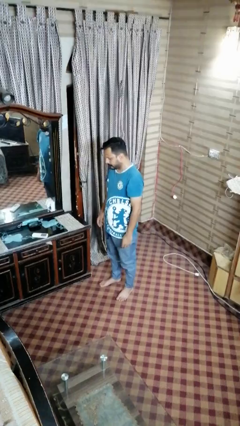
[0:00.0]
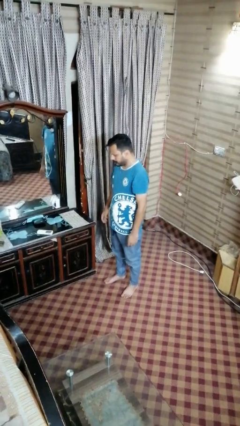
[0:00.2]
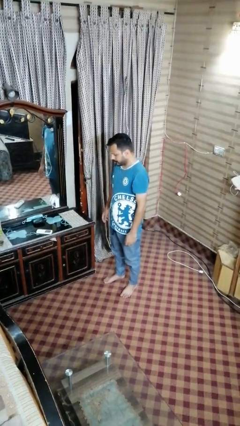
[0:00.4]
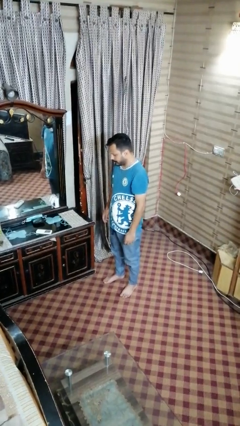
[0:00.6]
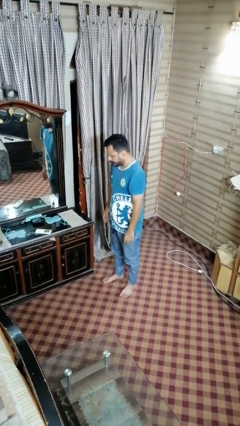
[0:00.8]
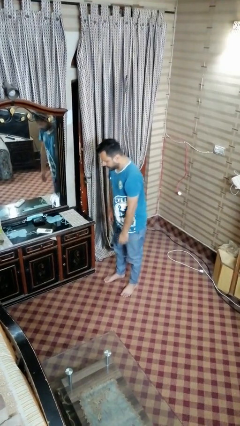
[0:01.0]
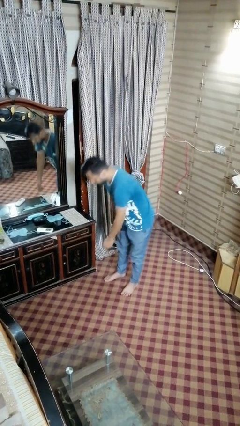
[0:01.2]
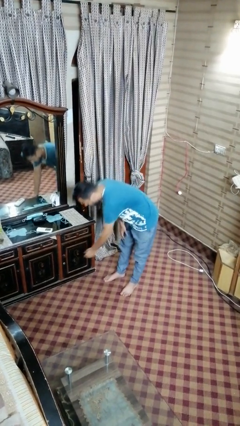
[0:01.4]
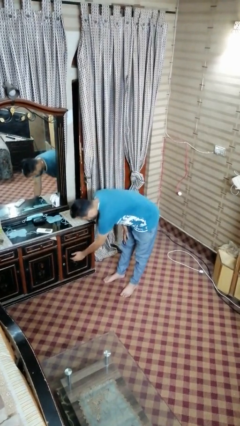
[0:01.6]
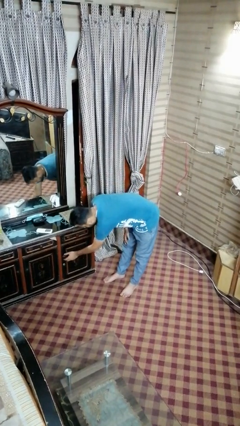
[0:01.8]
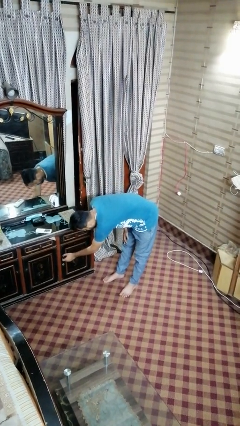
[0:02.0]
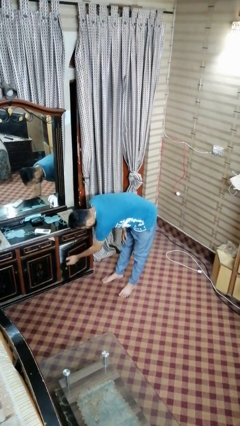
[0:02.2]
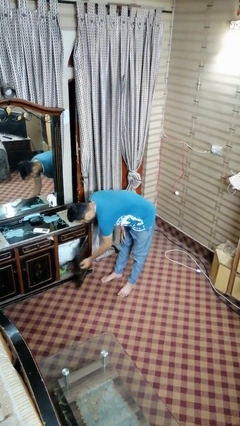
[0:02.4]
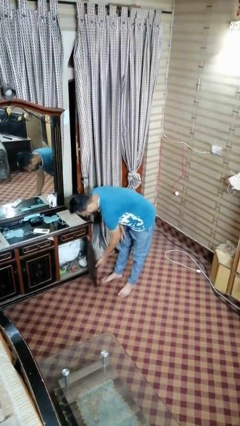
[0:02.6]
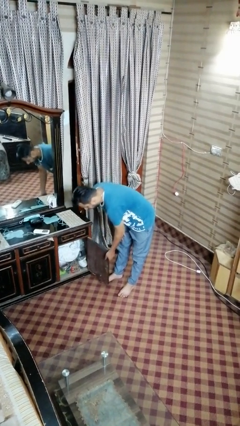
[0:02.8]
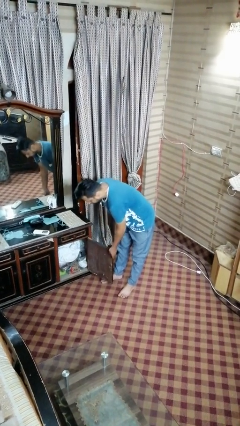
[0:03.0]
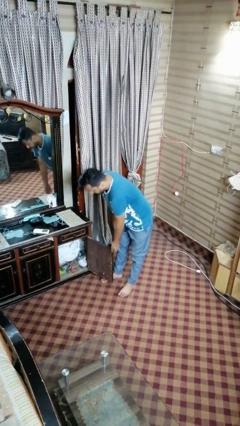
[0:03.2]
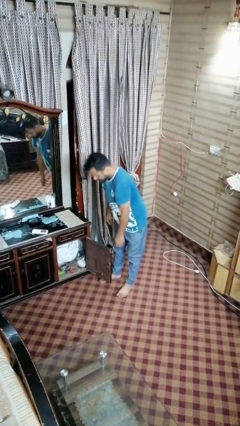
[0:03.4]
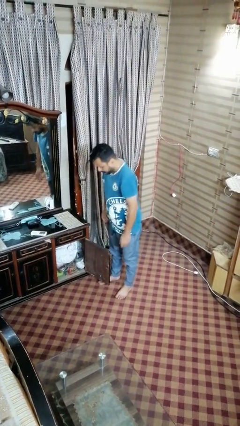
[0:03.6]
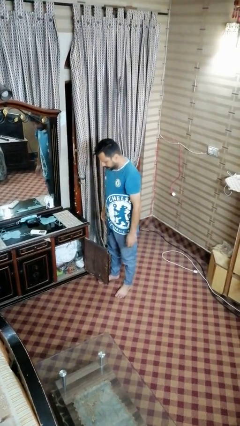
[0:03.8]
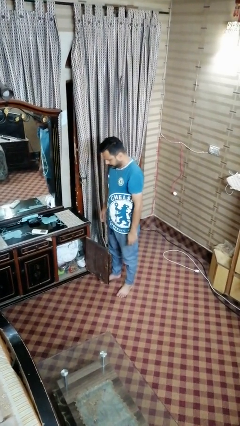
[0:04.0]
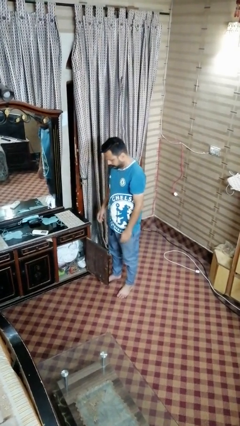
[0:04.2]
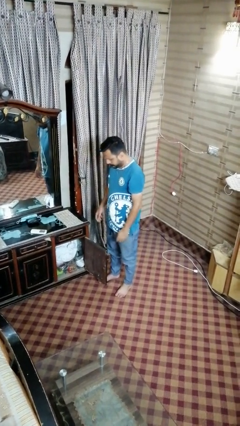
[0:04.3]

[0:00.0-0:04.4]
person opens dresser drawer

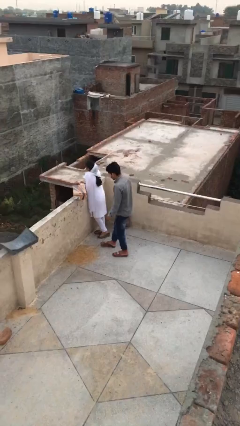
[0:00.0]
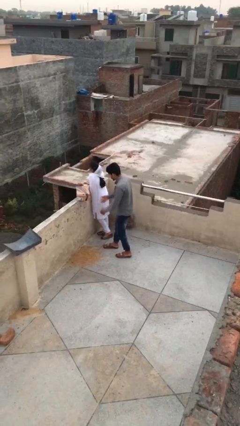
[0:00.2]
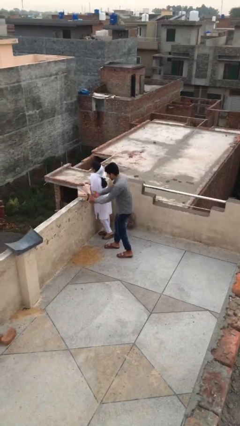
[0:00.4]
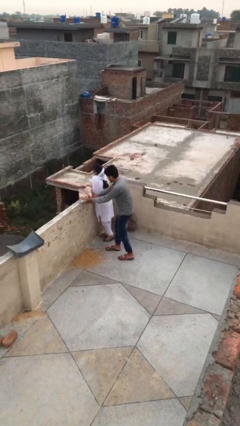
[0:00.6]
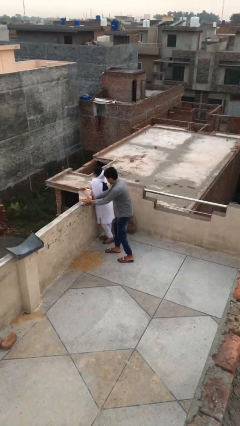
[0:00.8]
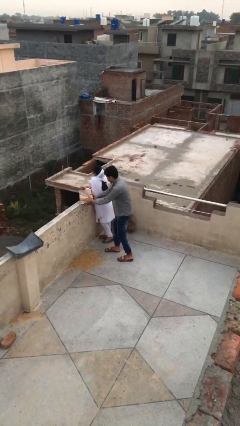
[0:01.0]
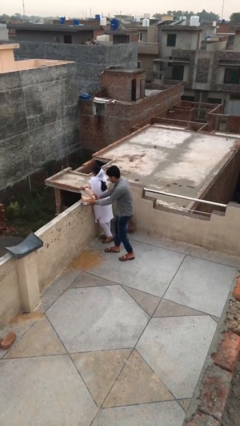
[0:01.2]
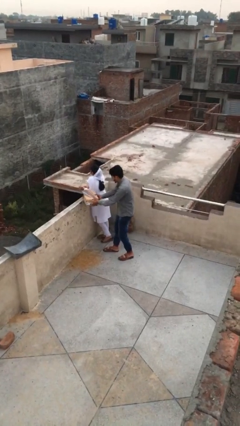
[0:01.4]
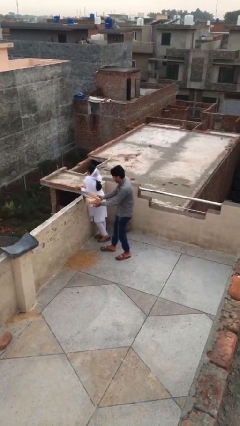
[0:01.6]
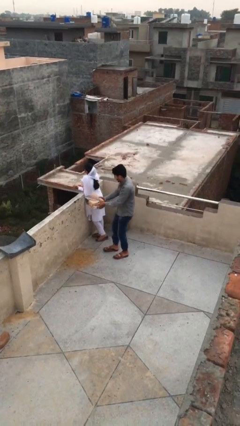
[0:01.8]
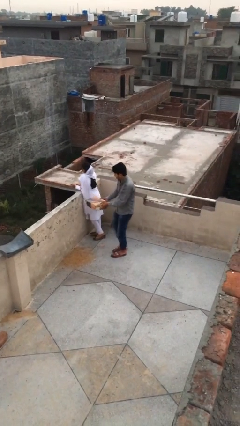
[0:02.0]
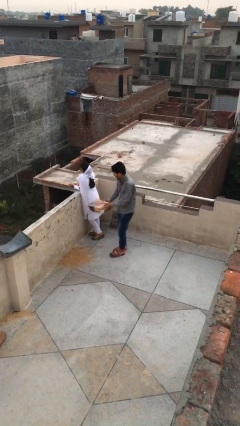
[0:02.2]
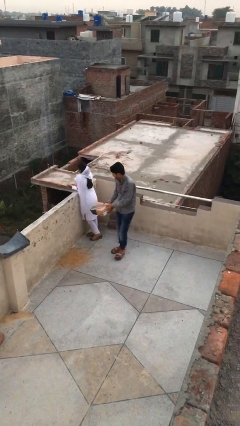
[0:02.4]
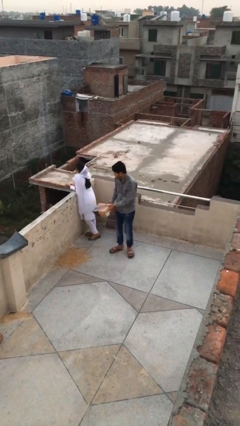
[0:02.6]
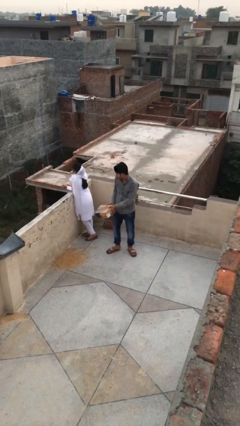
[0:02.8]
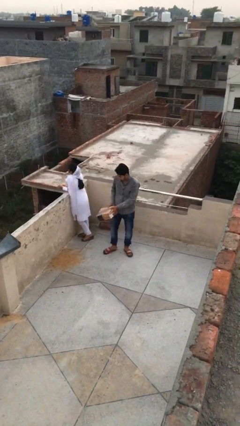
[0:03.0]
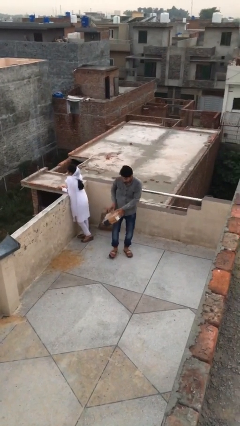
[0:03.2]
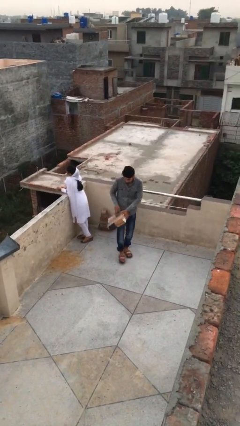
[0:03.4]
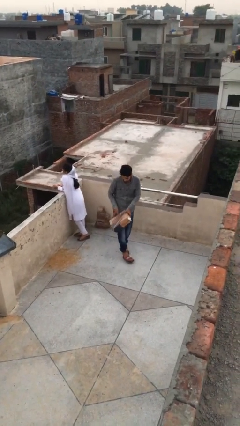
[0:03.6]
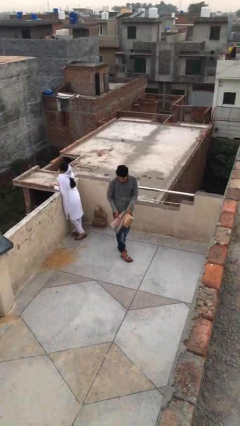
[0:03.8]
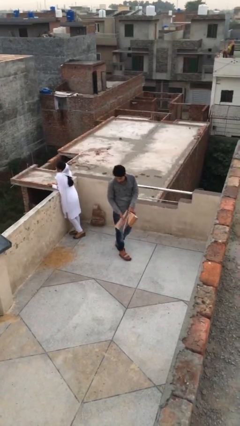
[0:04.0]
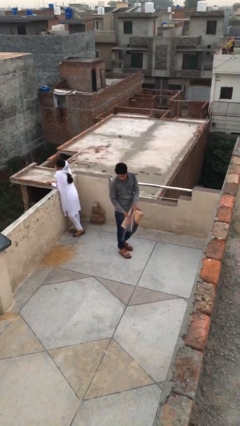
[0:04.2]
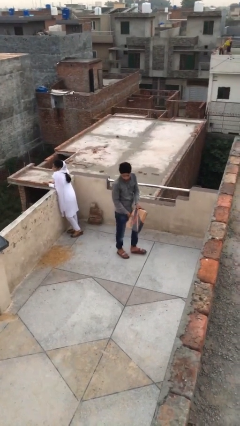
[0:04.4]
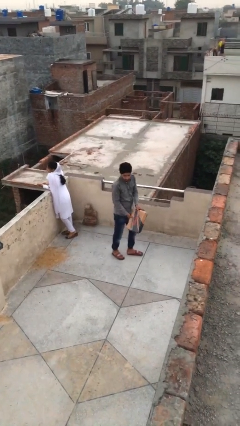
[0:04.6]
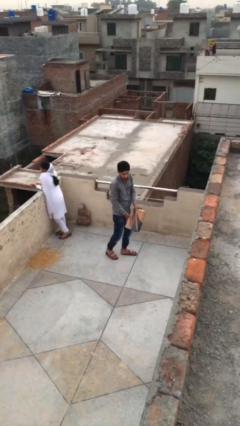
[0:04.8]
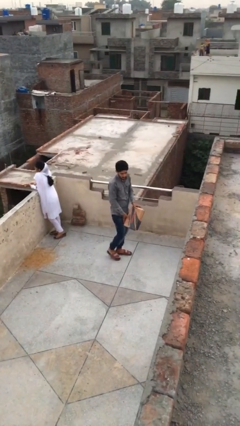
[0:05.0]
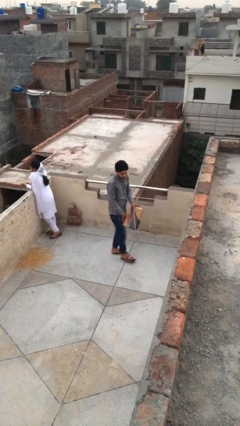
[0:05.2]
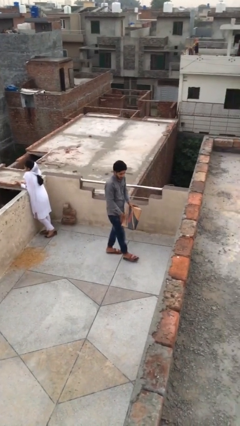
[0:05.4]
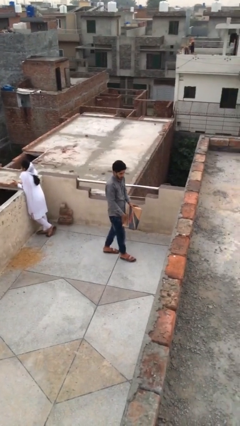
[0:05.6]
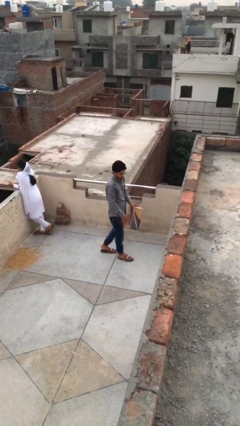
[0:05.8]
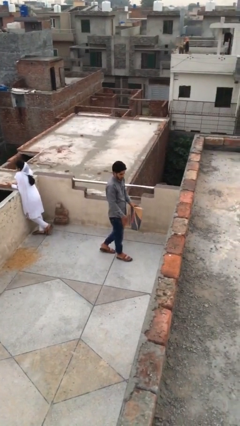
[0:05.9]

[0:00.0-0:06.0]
person steals object from person

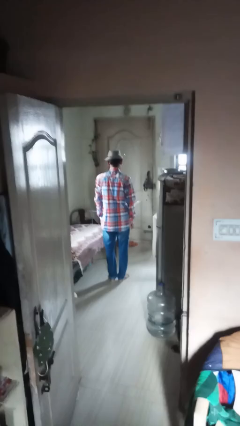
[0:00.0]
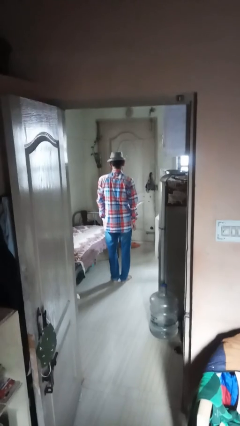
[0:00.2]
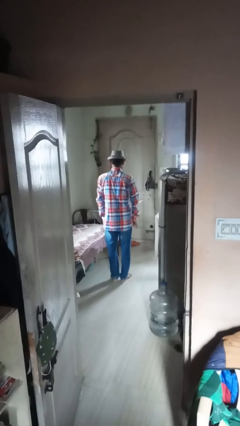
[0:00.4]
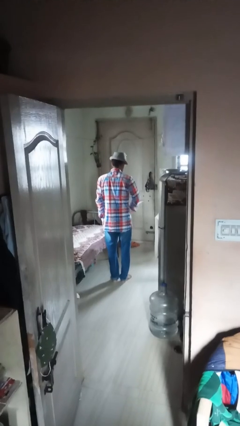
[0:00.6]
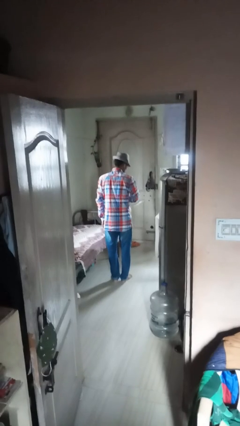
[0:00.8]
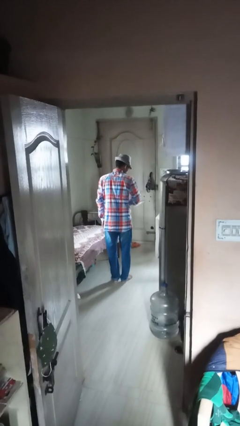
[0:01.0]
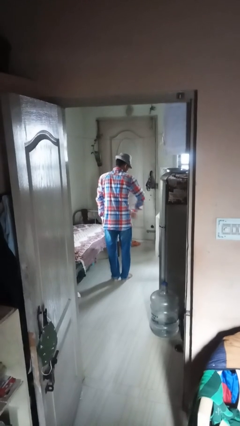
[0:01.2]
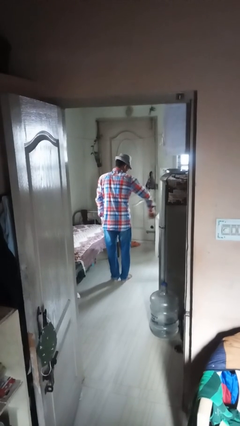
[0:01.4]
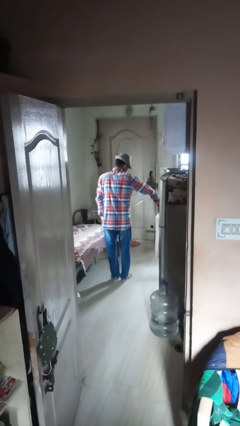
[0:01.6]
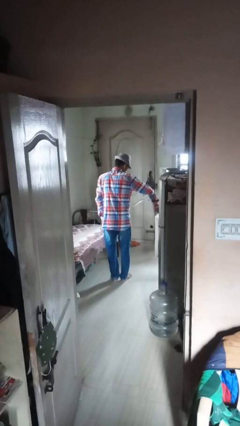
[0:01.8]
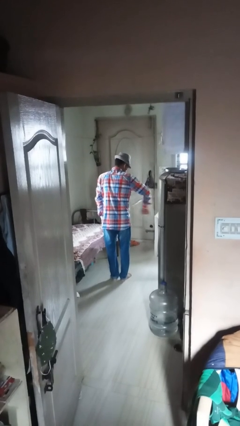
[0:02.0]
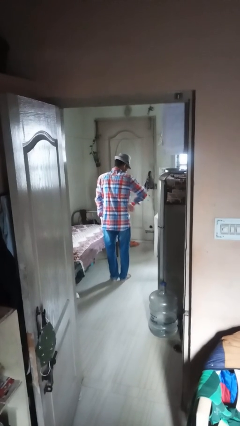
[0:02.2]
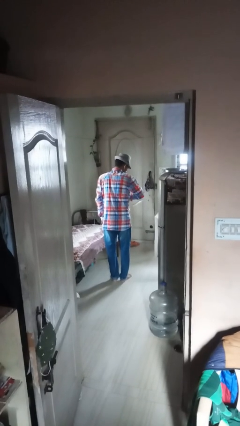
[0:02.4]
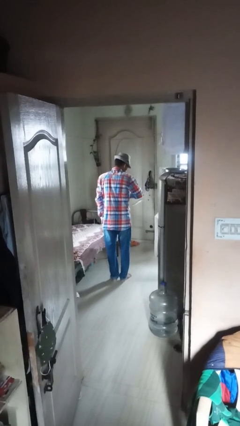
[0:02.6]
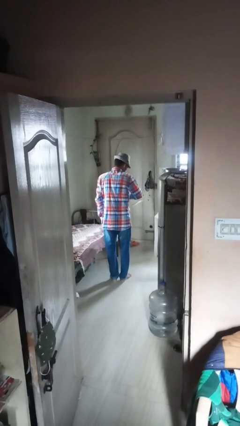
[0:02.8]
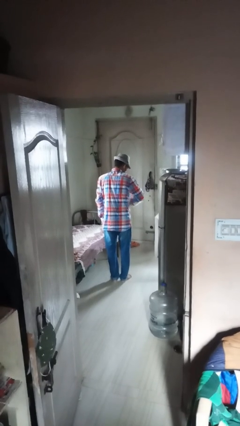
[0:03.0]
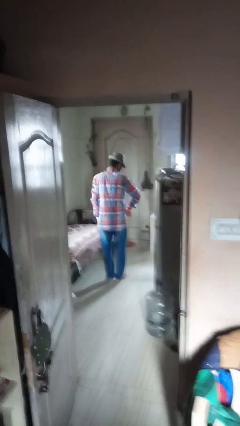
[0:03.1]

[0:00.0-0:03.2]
person gestures hang loose

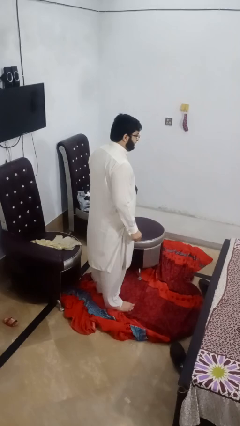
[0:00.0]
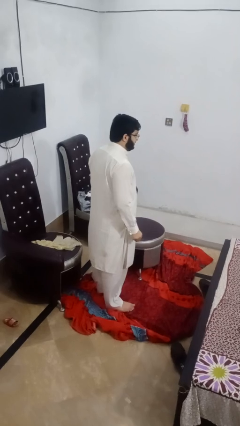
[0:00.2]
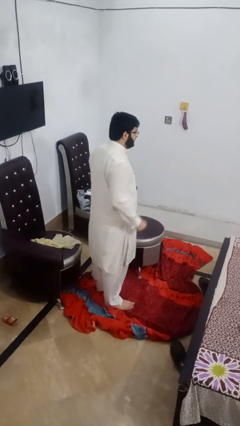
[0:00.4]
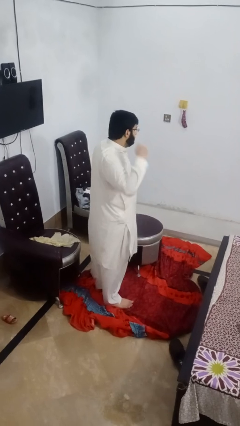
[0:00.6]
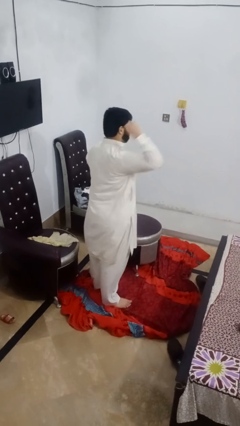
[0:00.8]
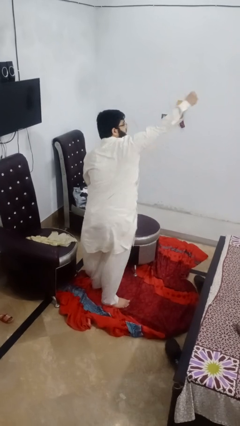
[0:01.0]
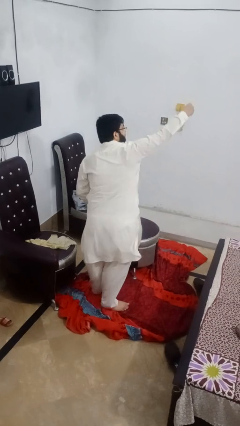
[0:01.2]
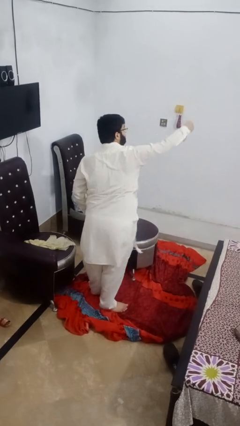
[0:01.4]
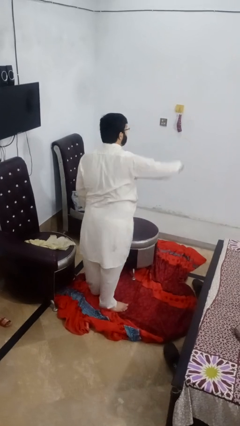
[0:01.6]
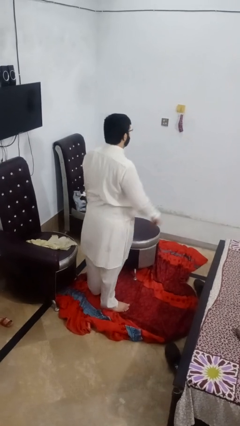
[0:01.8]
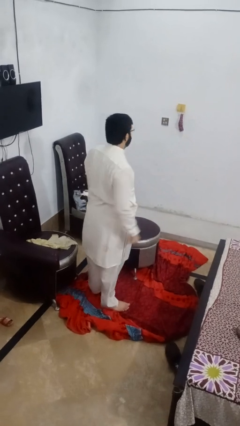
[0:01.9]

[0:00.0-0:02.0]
person punches

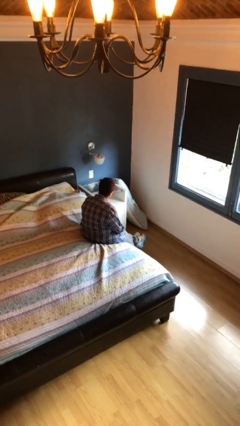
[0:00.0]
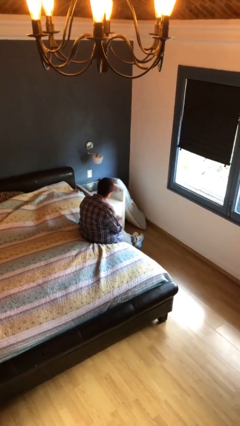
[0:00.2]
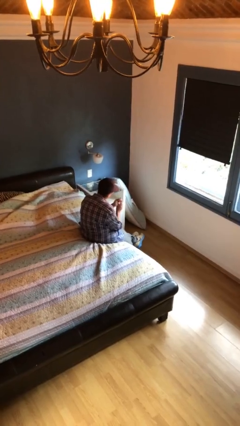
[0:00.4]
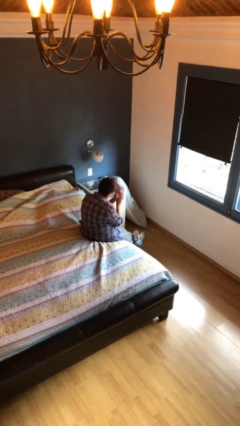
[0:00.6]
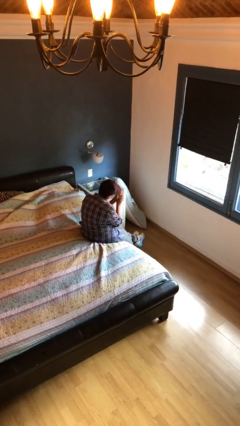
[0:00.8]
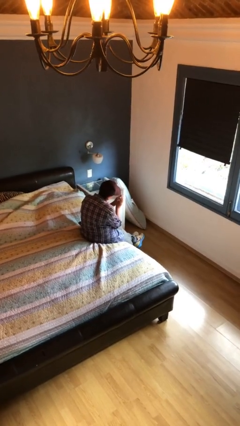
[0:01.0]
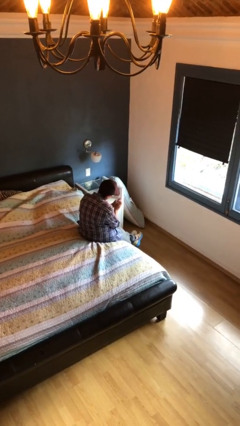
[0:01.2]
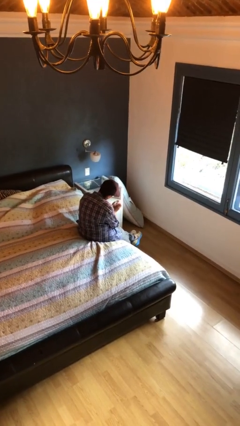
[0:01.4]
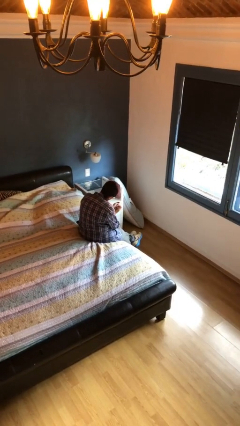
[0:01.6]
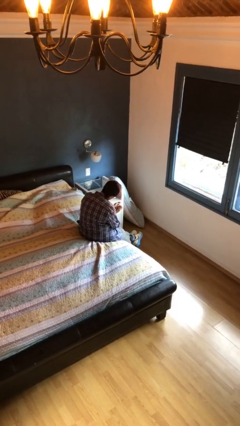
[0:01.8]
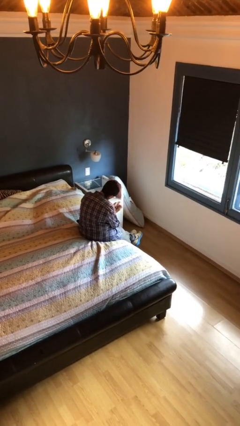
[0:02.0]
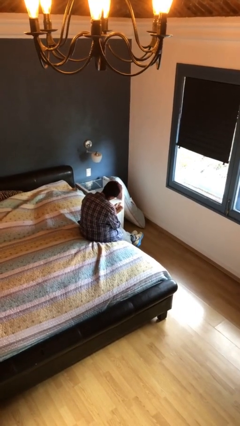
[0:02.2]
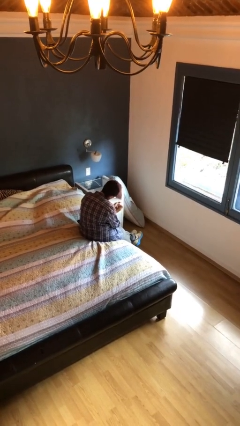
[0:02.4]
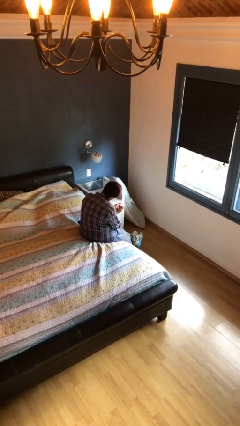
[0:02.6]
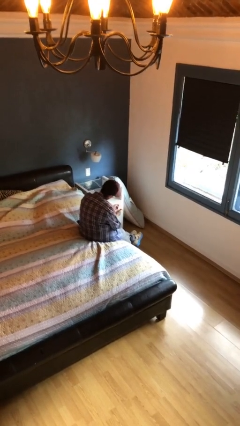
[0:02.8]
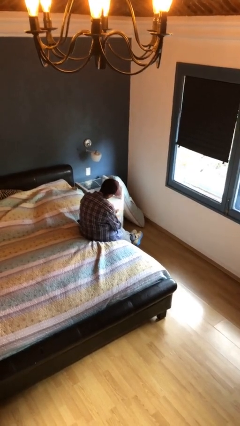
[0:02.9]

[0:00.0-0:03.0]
person clips fingernails
